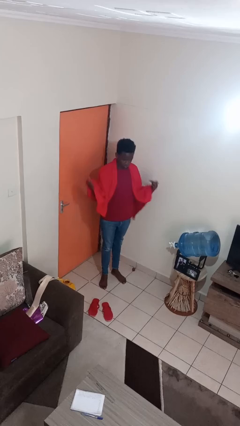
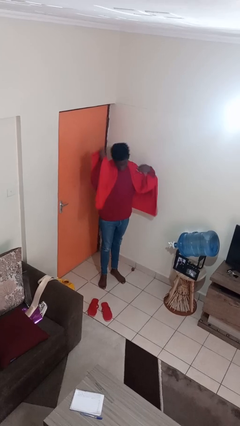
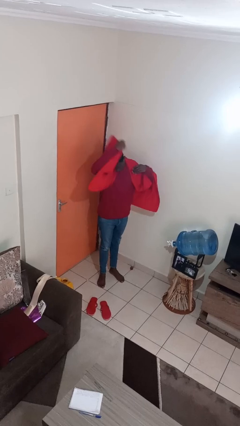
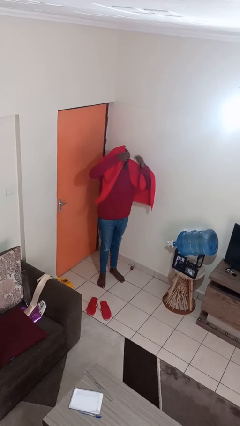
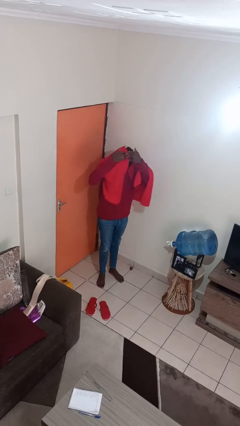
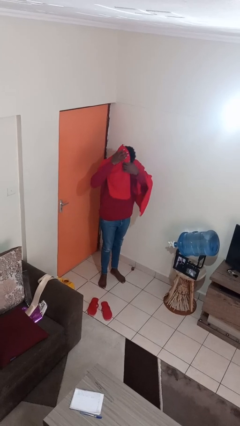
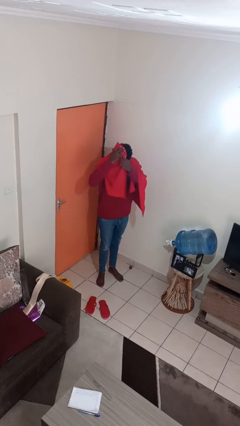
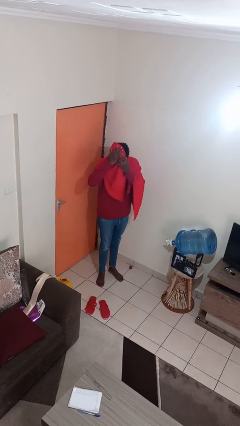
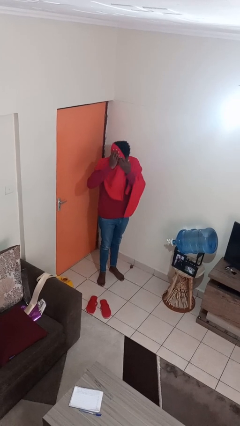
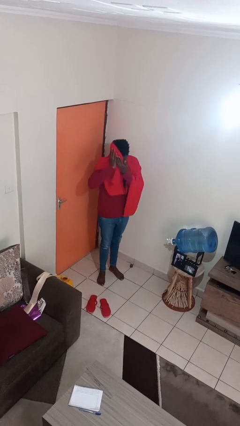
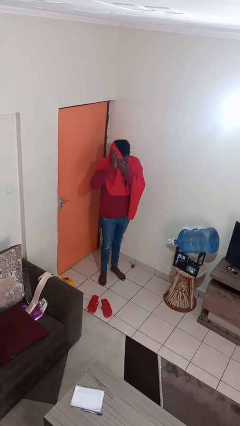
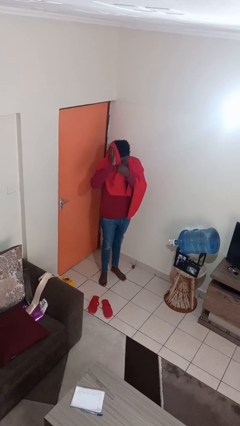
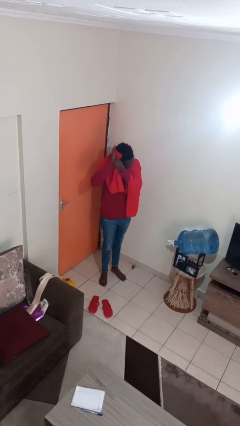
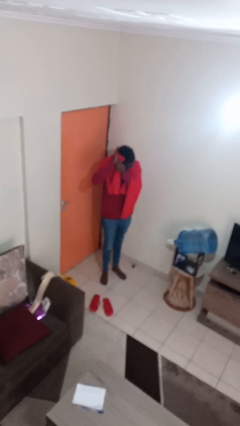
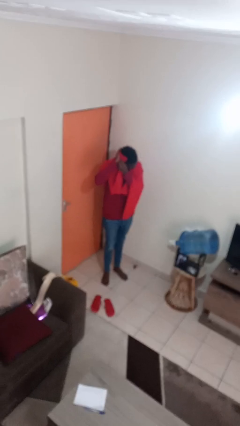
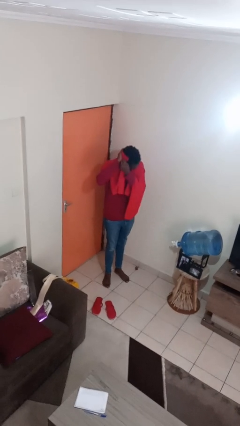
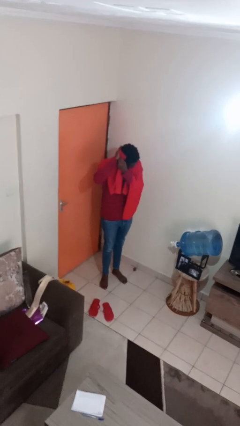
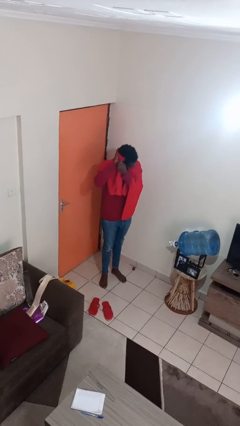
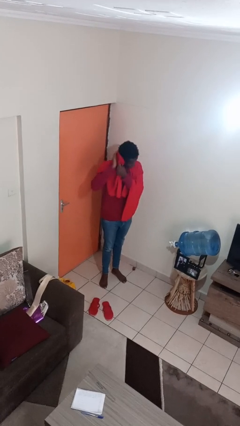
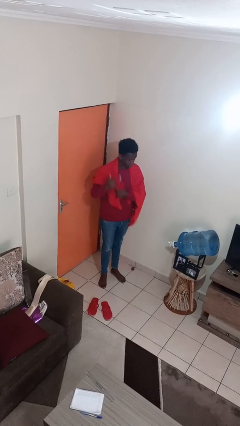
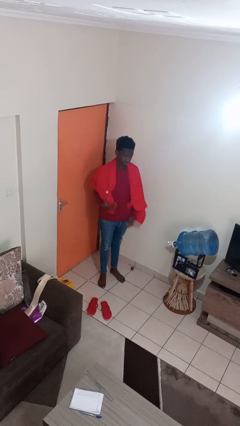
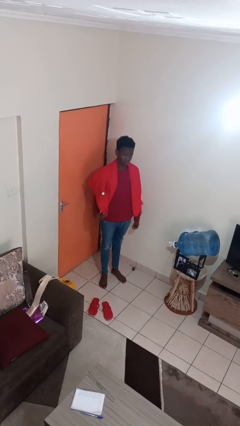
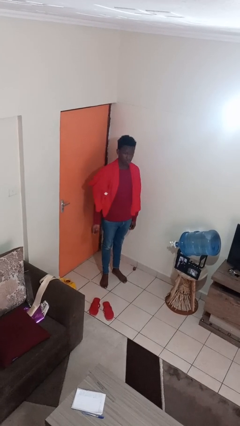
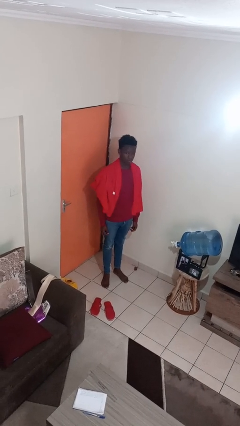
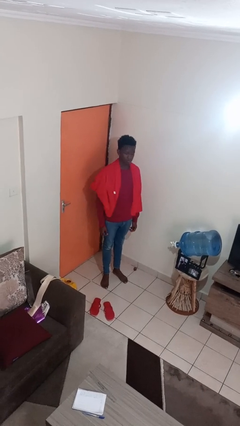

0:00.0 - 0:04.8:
person dries hair with towel

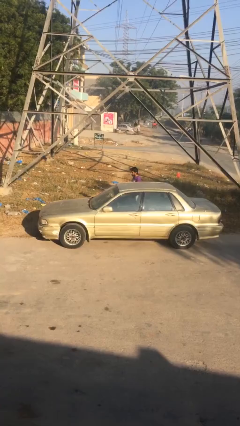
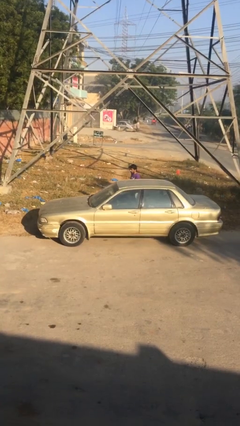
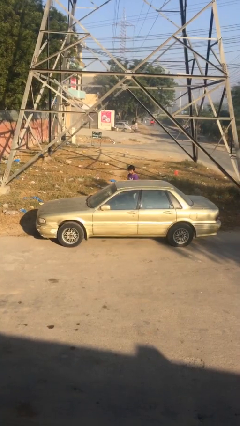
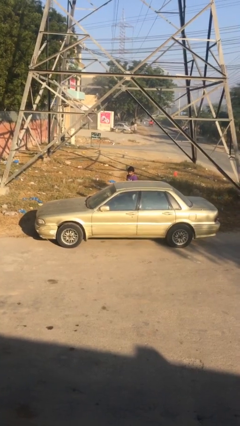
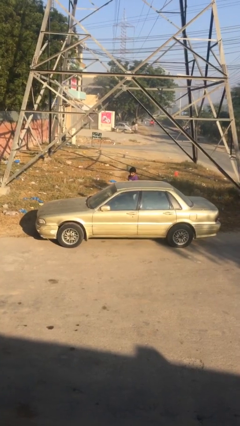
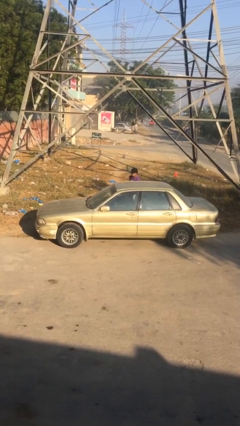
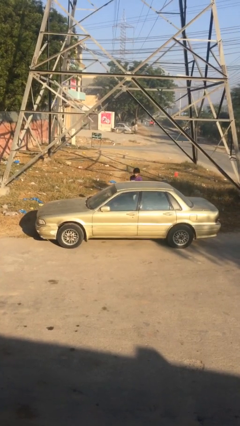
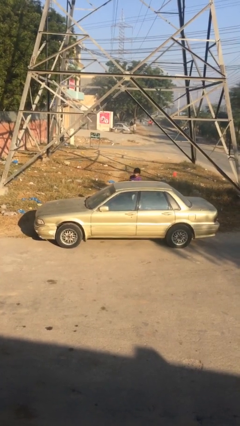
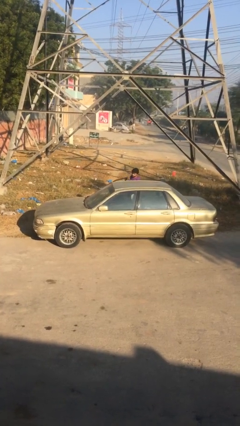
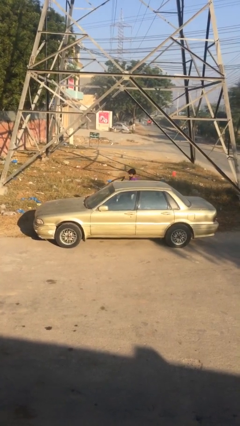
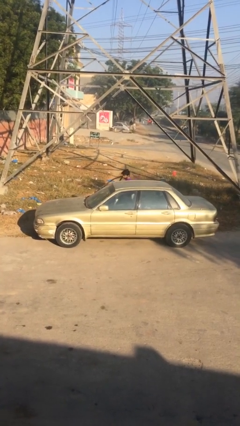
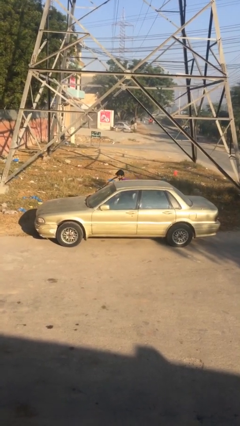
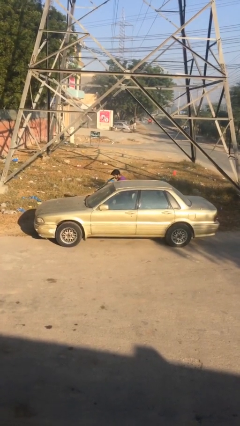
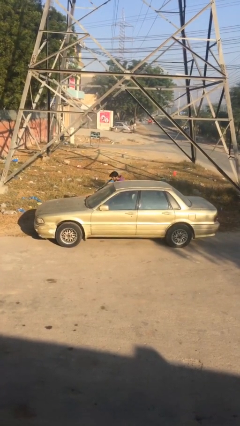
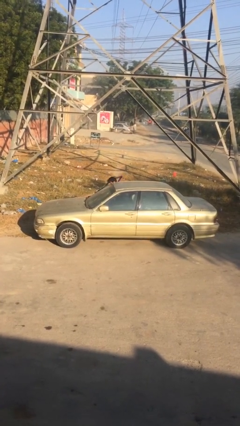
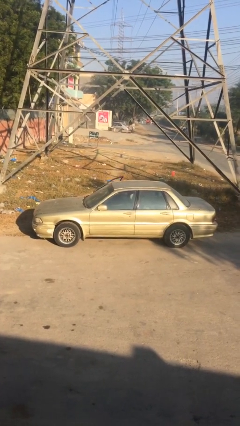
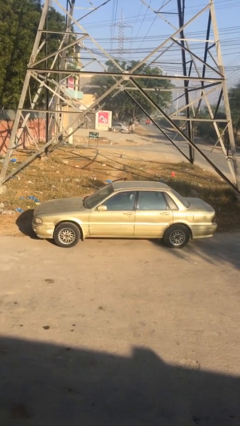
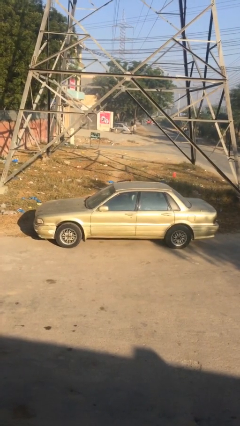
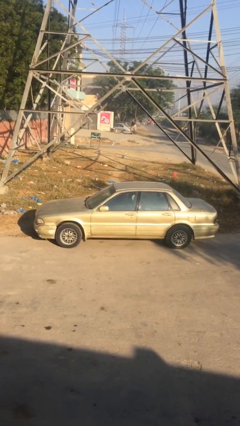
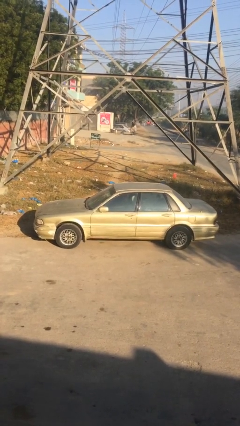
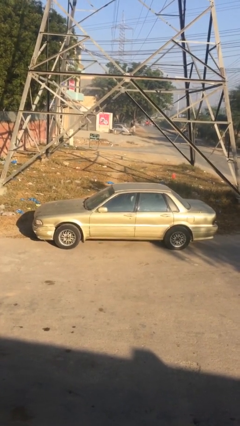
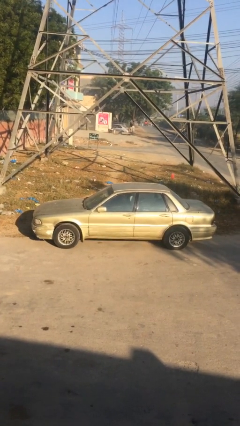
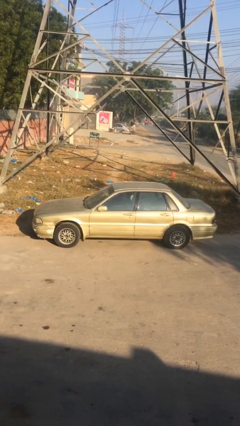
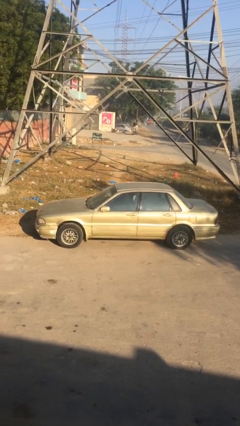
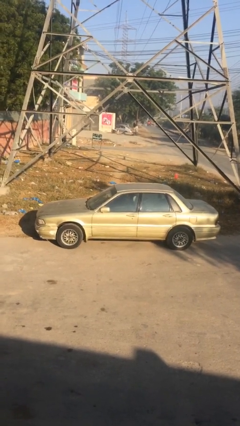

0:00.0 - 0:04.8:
car picks up person

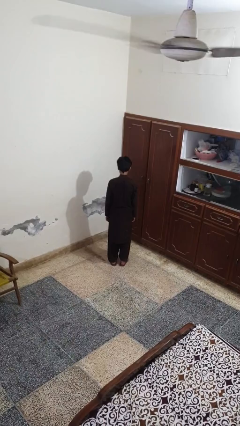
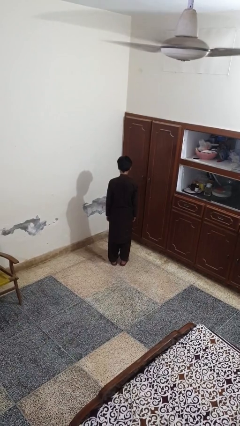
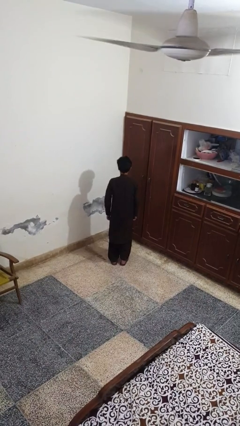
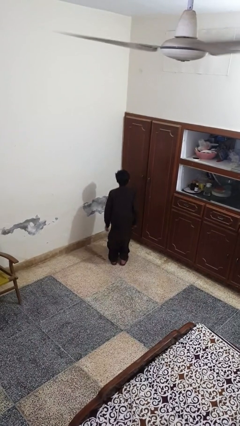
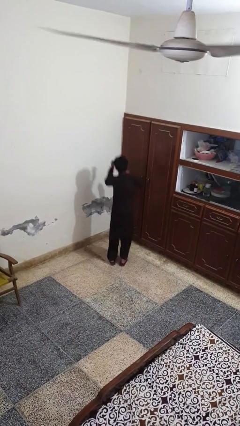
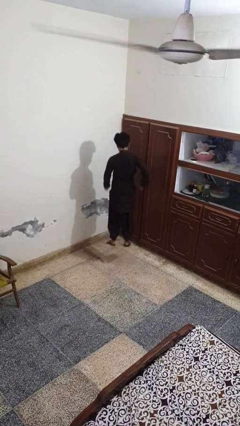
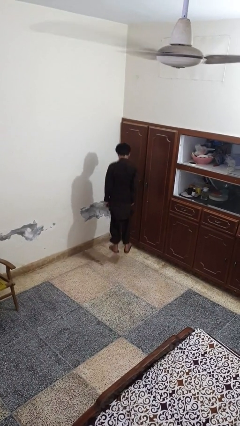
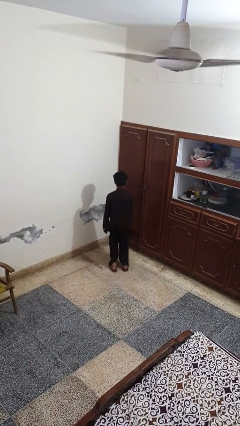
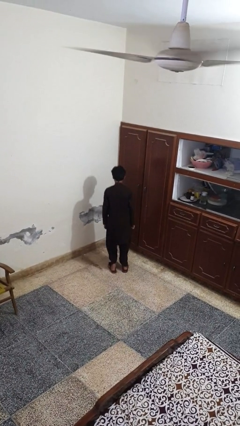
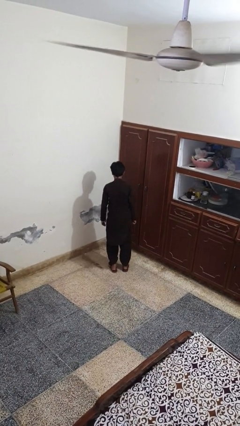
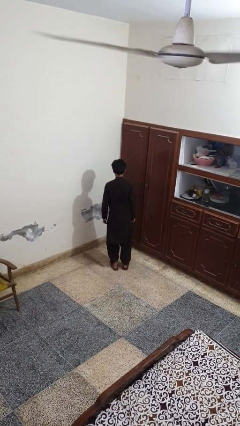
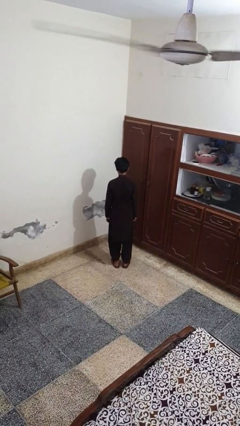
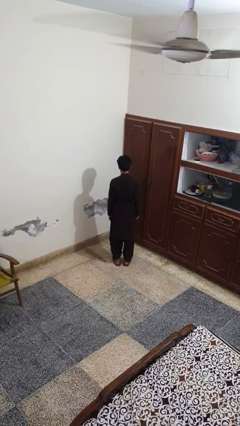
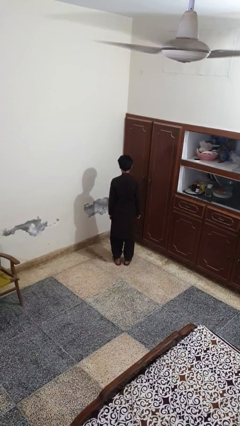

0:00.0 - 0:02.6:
person jumps

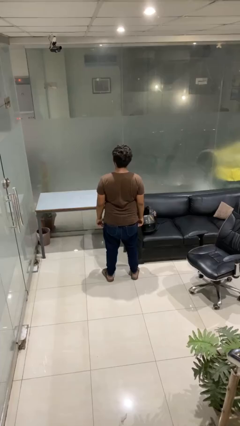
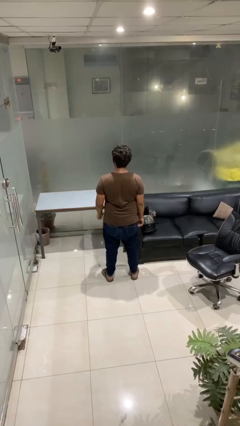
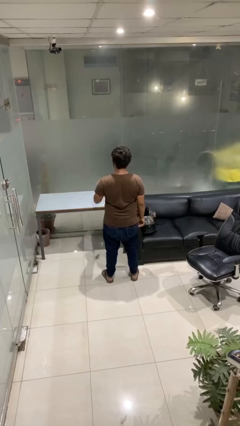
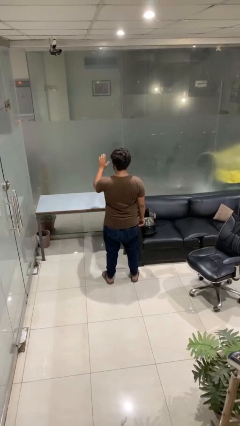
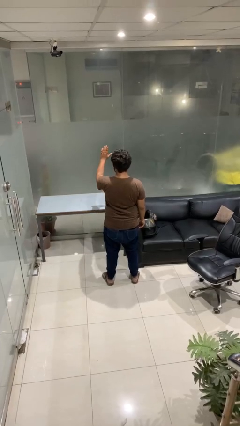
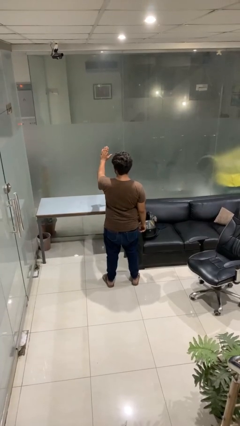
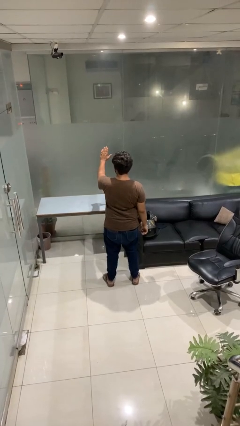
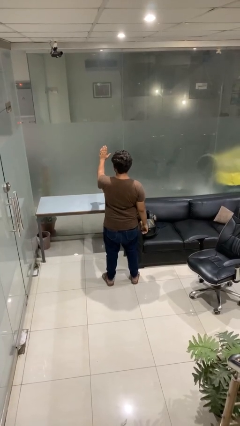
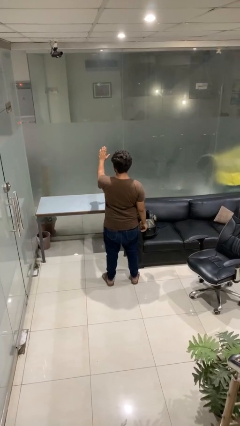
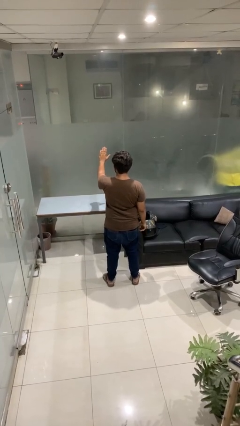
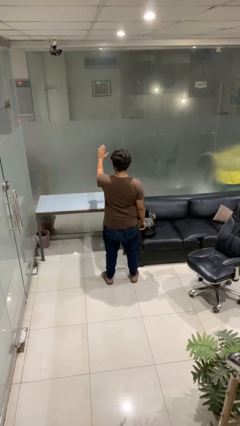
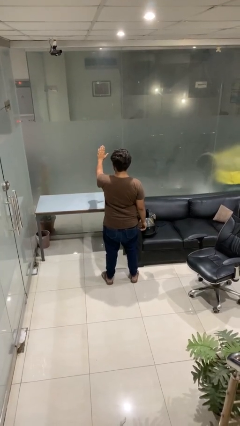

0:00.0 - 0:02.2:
person gestures stop

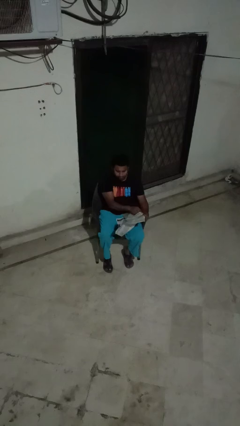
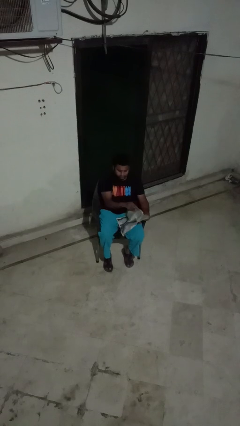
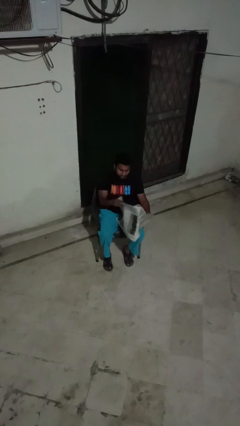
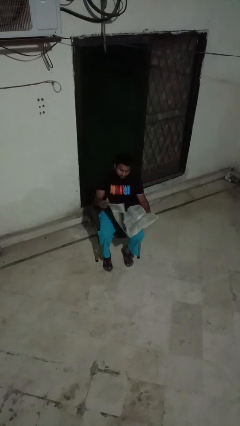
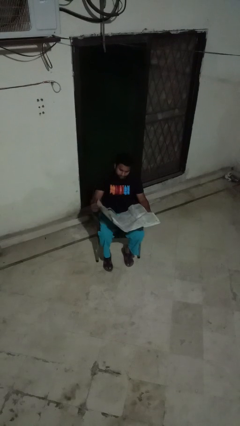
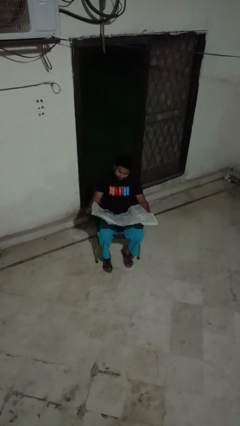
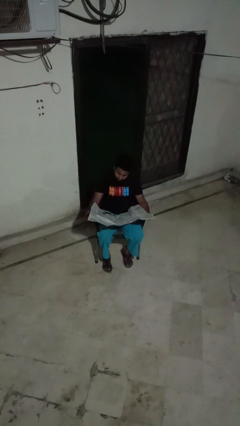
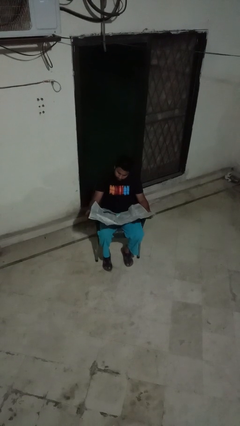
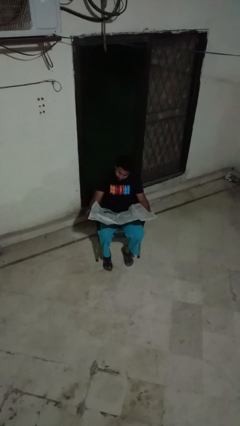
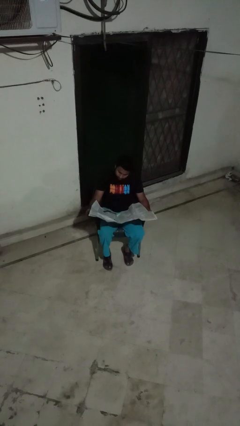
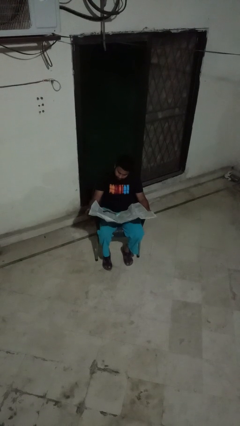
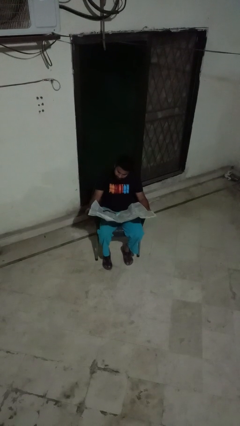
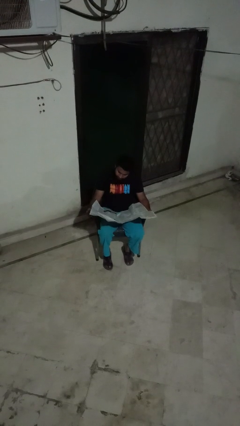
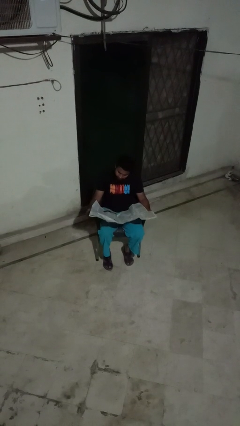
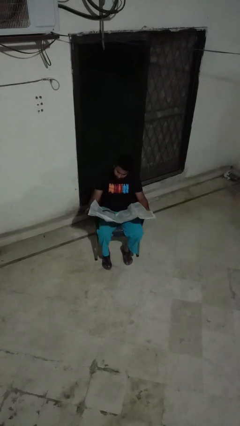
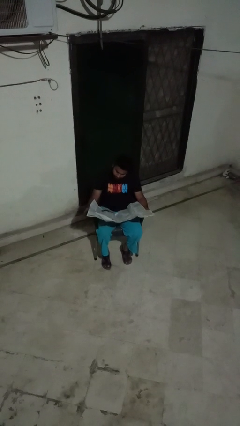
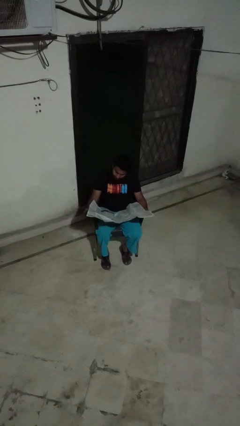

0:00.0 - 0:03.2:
person reads newspaper
